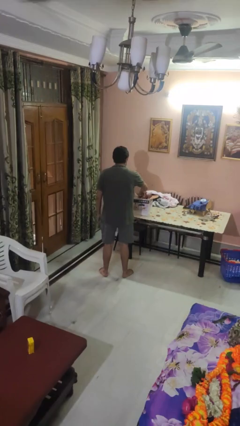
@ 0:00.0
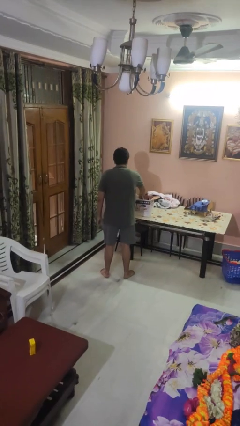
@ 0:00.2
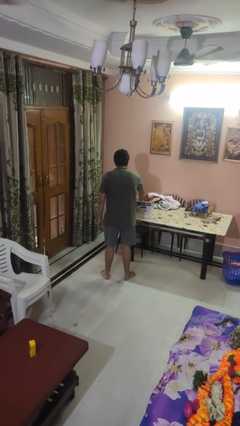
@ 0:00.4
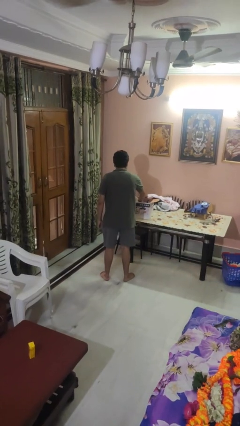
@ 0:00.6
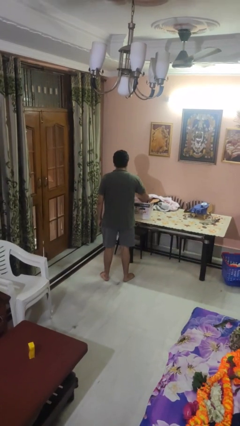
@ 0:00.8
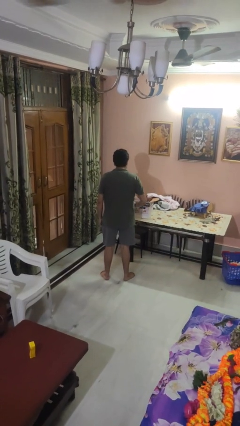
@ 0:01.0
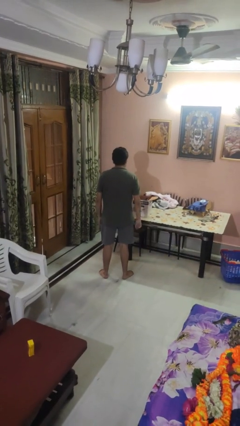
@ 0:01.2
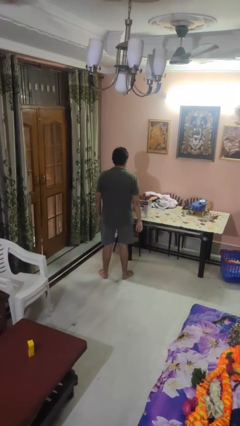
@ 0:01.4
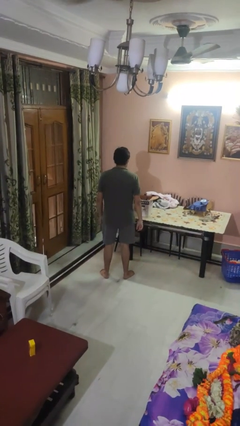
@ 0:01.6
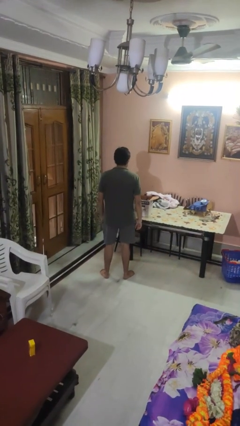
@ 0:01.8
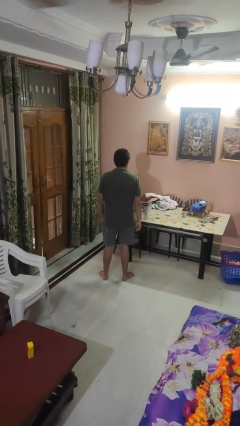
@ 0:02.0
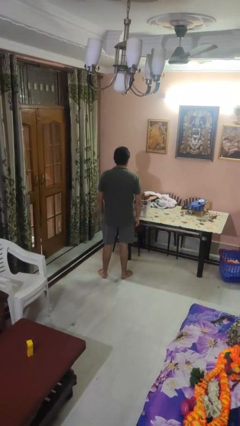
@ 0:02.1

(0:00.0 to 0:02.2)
person puts object into box

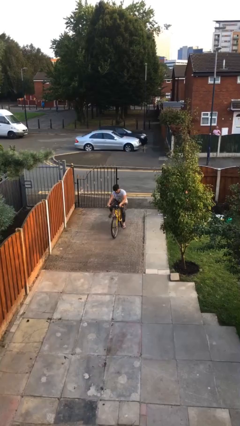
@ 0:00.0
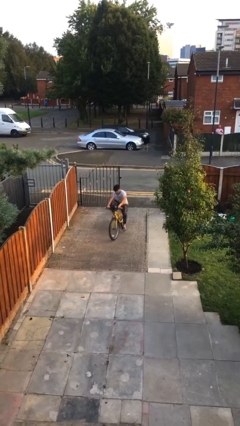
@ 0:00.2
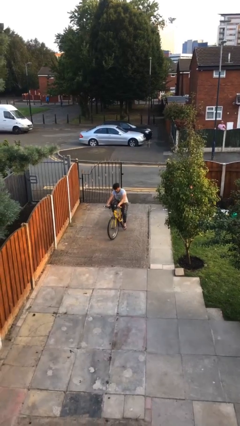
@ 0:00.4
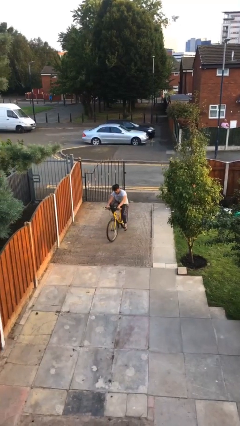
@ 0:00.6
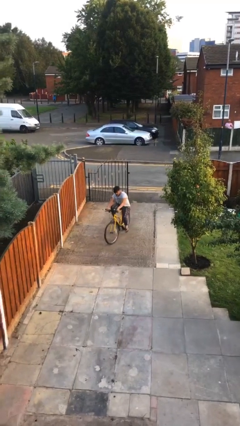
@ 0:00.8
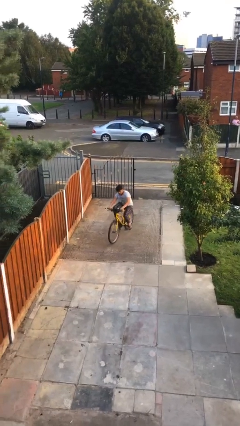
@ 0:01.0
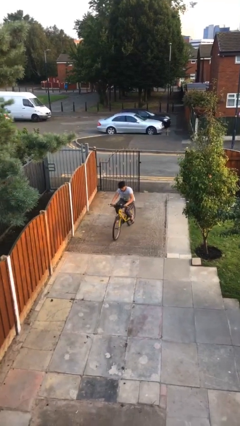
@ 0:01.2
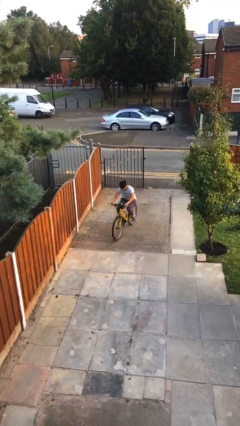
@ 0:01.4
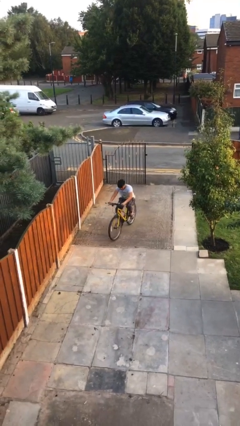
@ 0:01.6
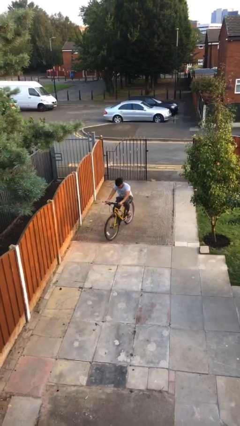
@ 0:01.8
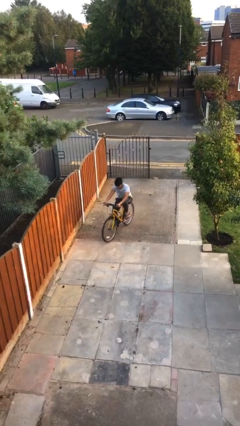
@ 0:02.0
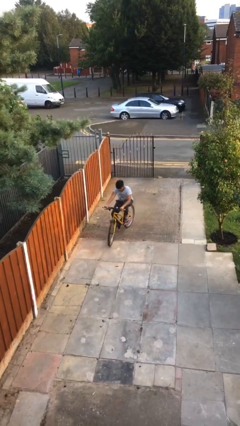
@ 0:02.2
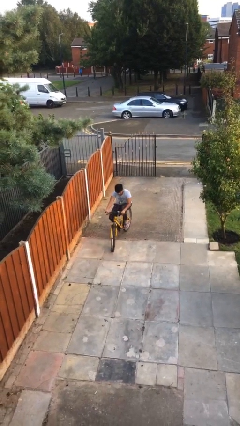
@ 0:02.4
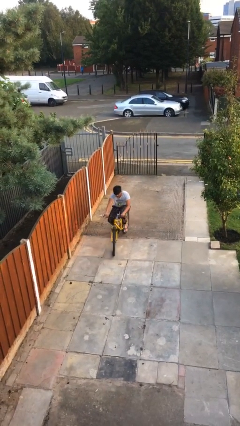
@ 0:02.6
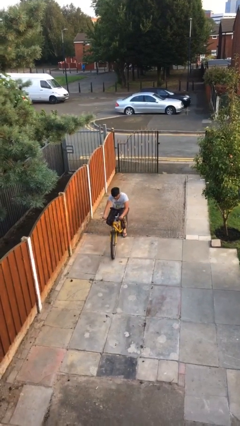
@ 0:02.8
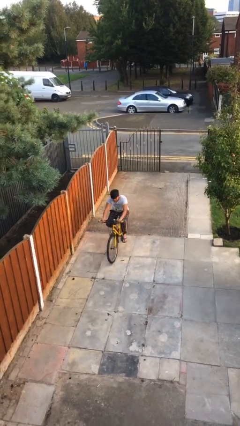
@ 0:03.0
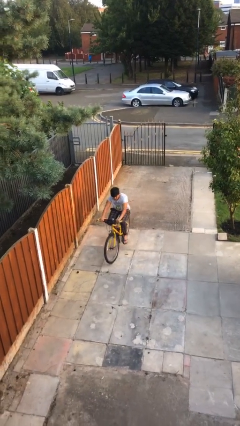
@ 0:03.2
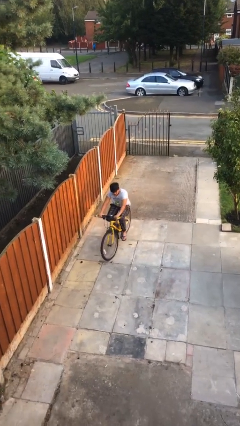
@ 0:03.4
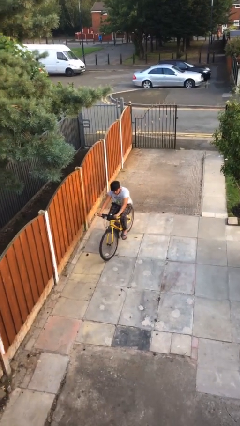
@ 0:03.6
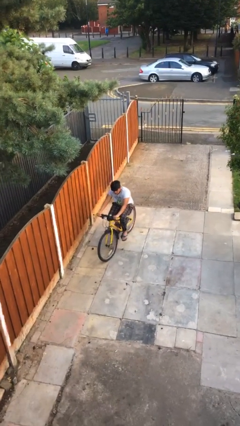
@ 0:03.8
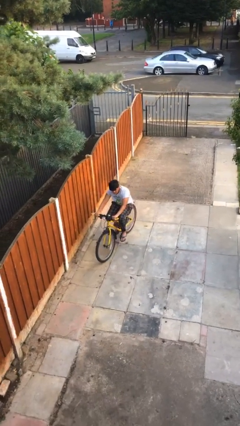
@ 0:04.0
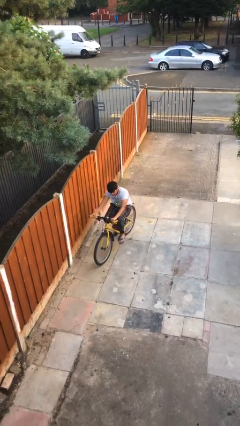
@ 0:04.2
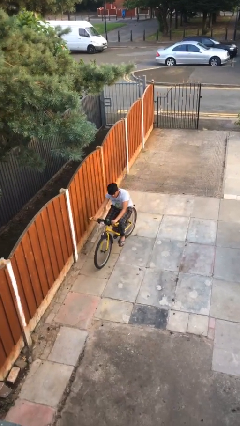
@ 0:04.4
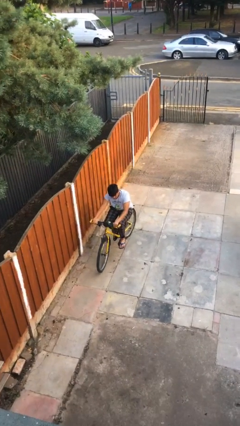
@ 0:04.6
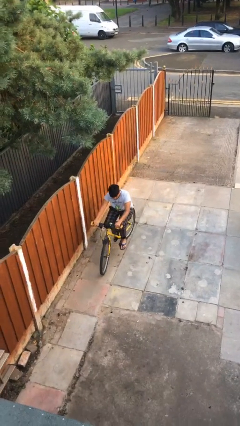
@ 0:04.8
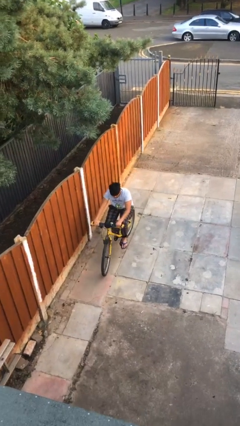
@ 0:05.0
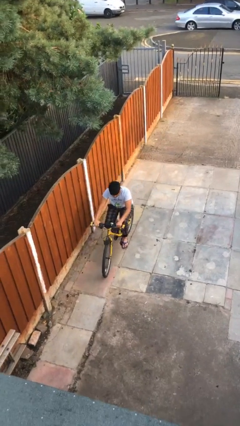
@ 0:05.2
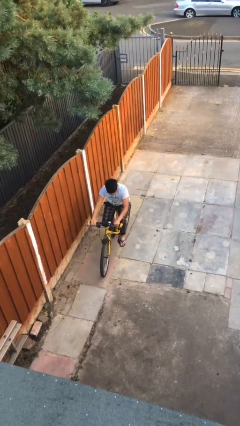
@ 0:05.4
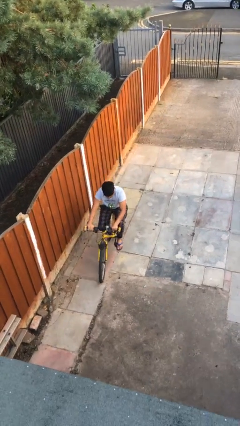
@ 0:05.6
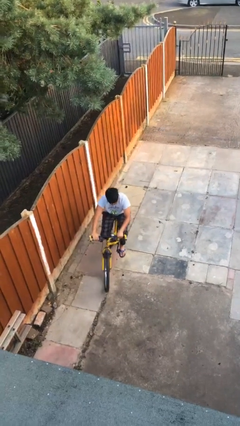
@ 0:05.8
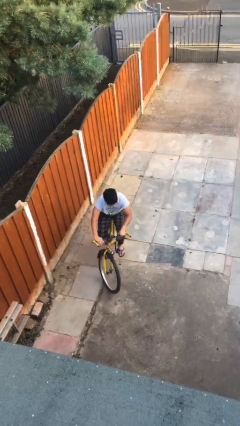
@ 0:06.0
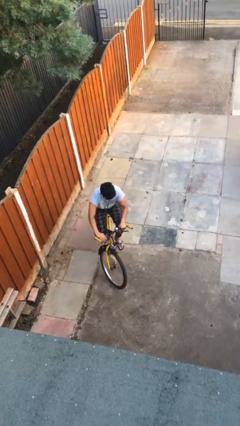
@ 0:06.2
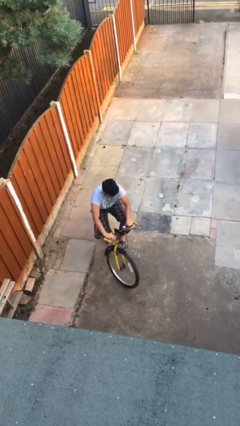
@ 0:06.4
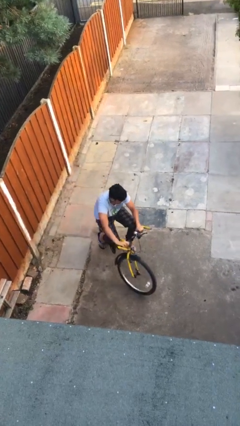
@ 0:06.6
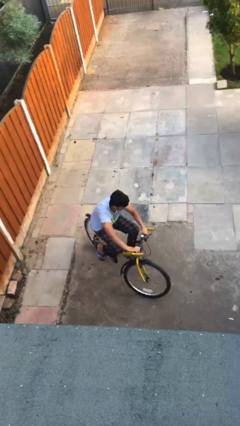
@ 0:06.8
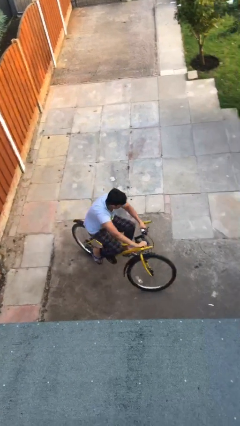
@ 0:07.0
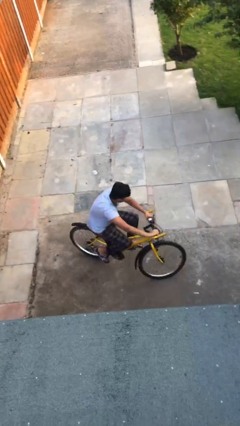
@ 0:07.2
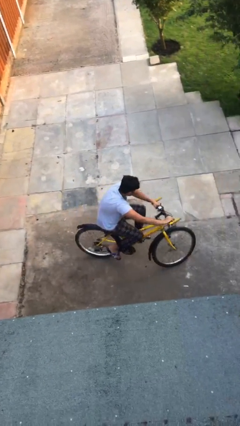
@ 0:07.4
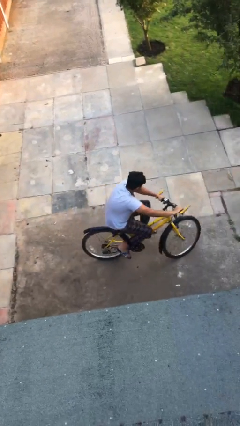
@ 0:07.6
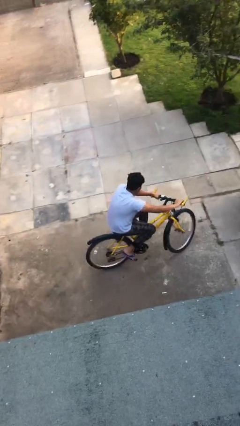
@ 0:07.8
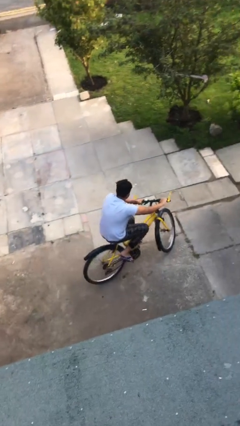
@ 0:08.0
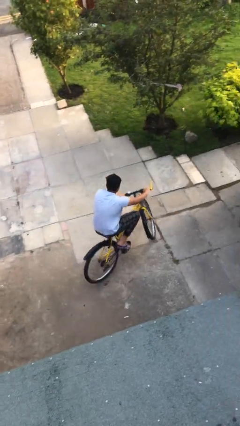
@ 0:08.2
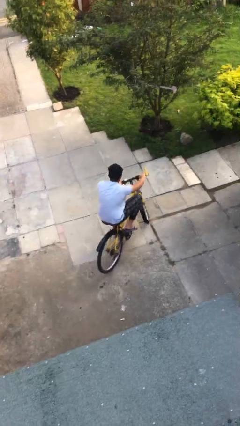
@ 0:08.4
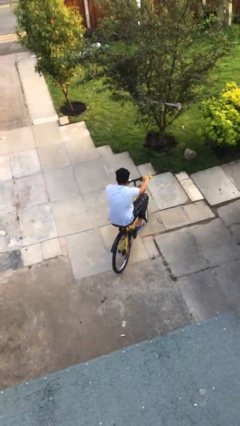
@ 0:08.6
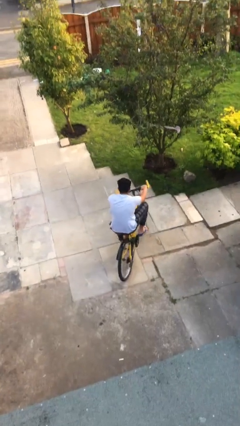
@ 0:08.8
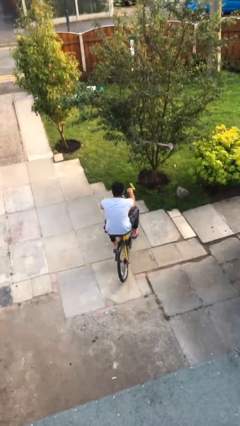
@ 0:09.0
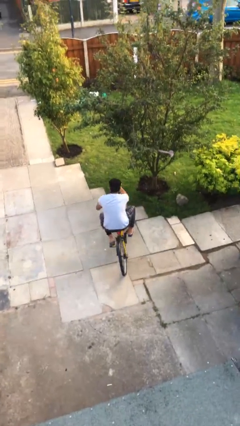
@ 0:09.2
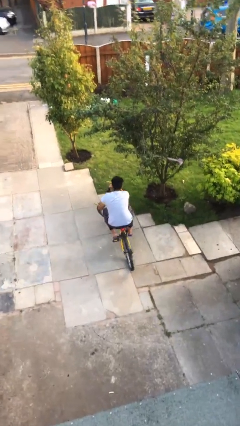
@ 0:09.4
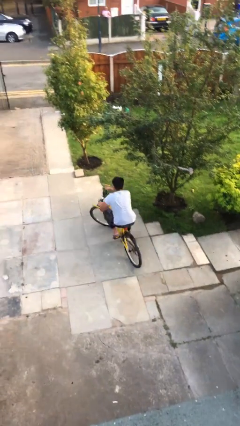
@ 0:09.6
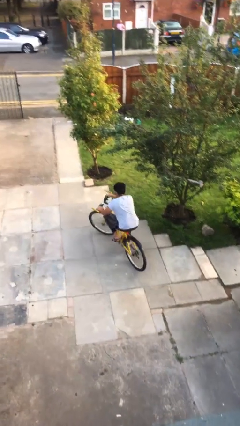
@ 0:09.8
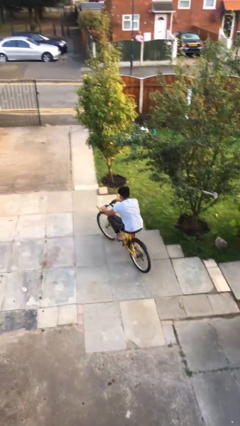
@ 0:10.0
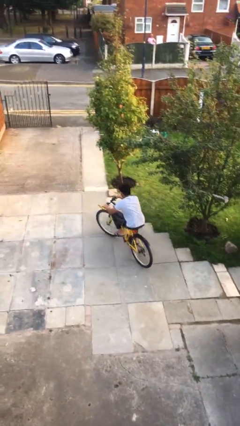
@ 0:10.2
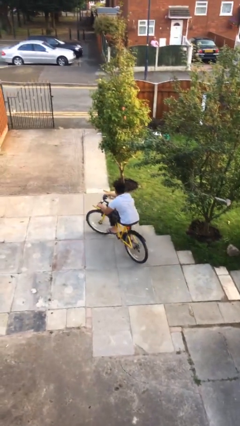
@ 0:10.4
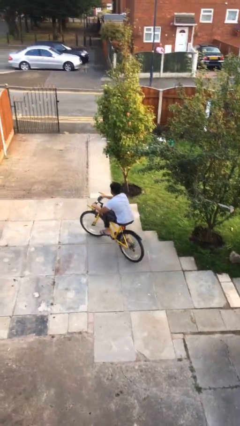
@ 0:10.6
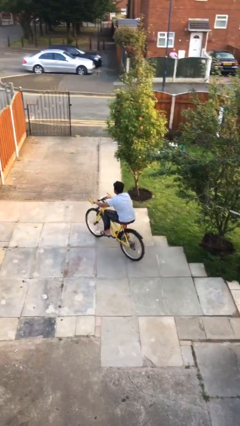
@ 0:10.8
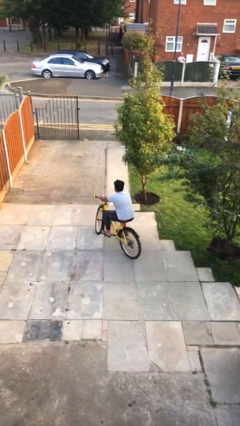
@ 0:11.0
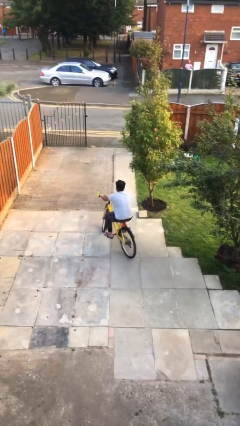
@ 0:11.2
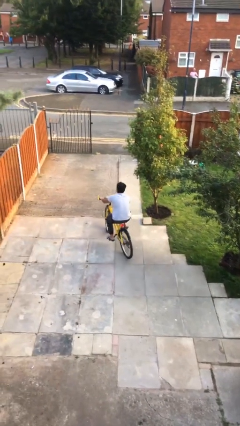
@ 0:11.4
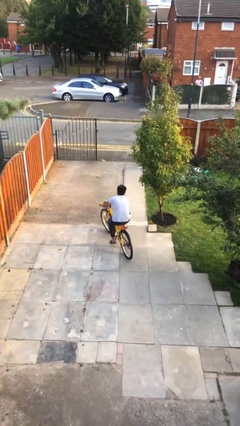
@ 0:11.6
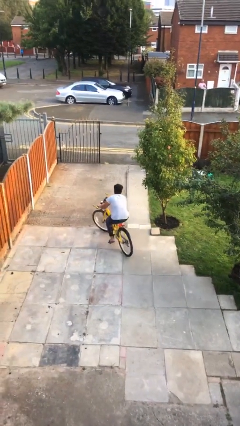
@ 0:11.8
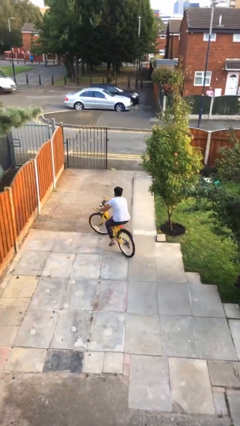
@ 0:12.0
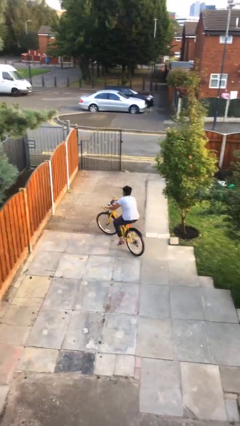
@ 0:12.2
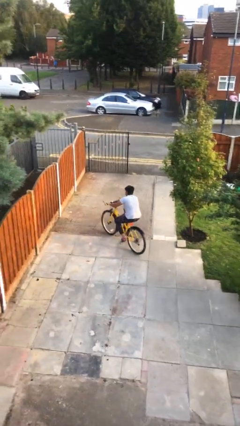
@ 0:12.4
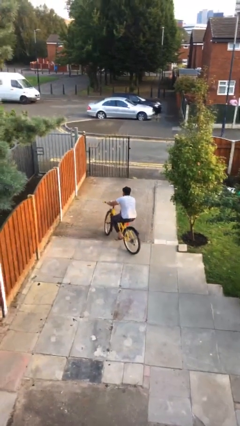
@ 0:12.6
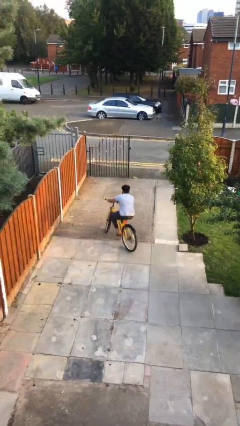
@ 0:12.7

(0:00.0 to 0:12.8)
person rides bicycle

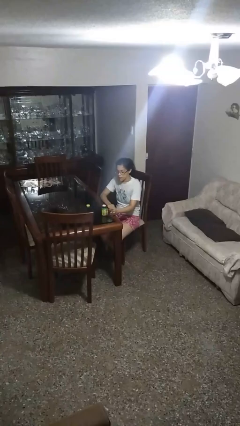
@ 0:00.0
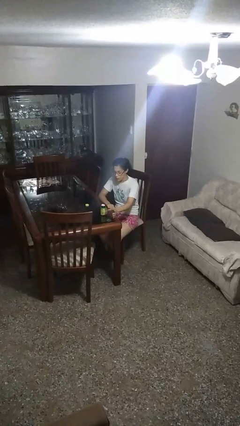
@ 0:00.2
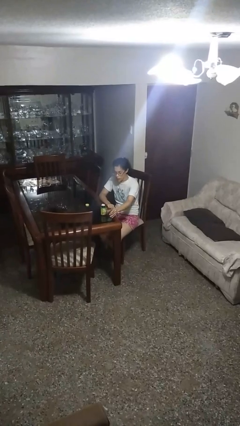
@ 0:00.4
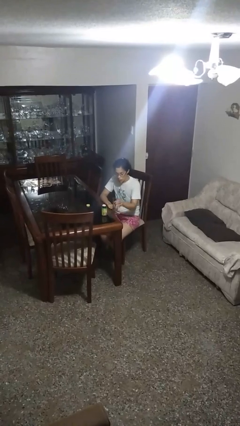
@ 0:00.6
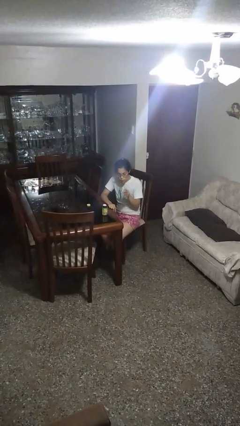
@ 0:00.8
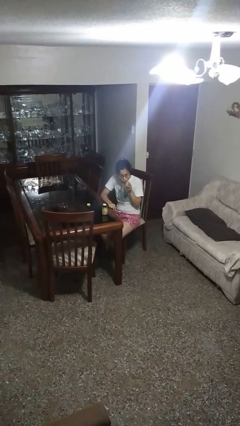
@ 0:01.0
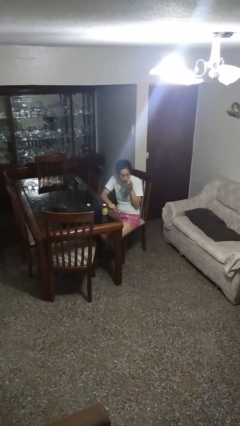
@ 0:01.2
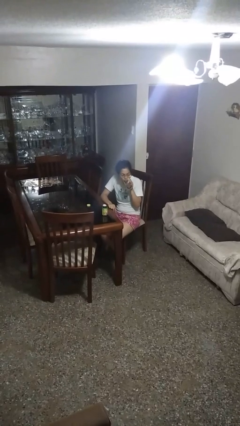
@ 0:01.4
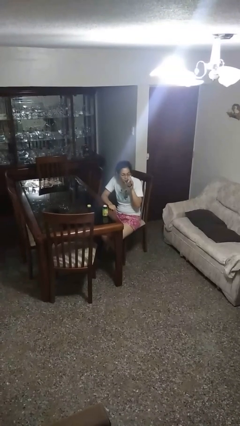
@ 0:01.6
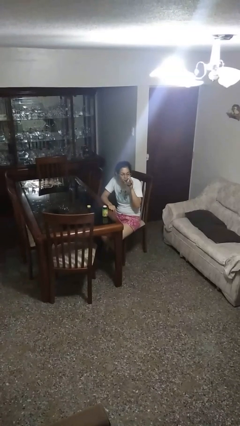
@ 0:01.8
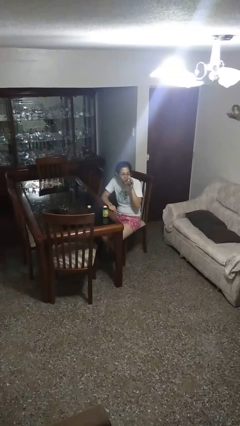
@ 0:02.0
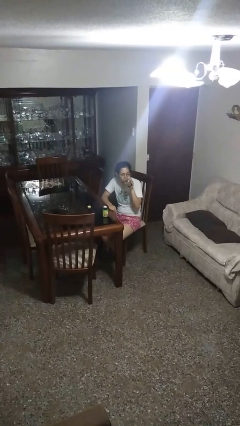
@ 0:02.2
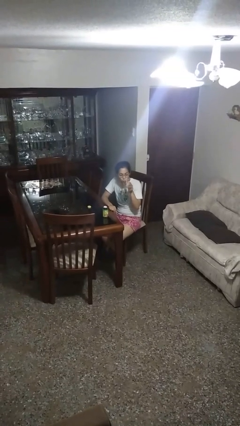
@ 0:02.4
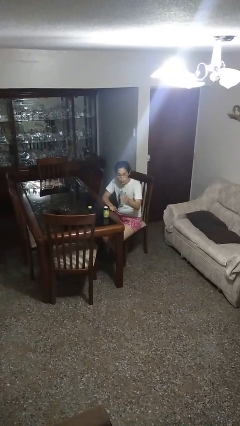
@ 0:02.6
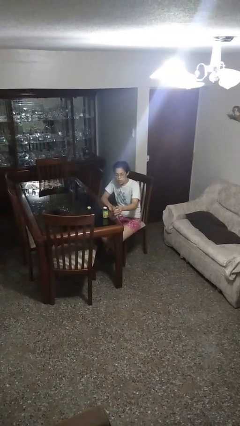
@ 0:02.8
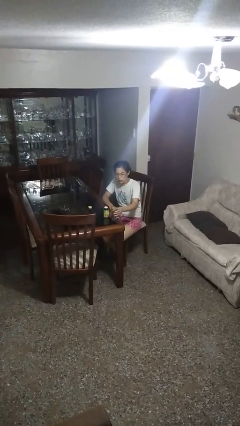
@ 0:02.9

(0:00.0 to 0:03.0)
person drinks from cup
